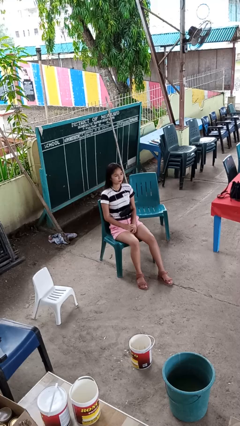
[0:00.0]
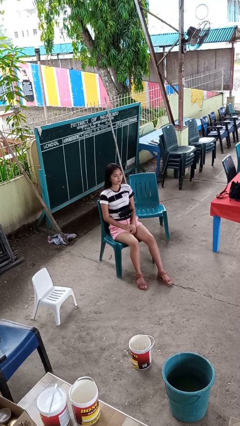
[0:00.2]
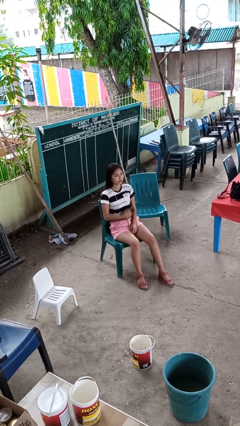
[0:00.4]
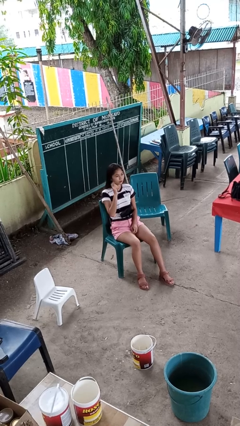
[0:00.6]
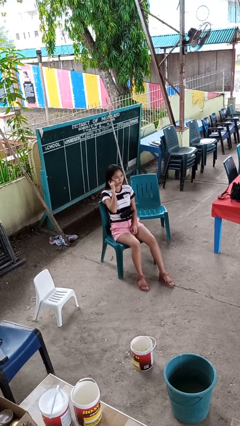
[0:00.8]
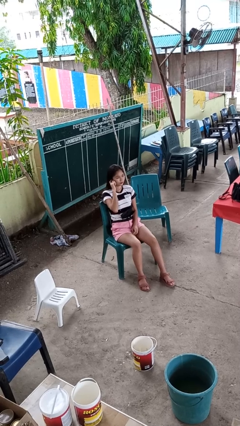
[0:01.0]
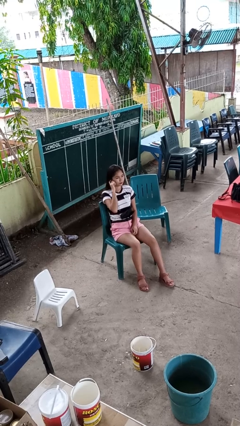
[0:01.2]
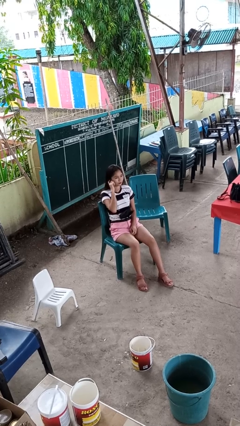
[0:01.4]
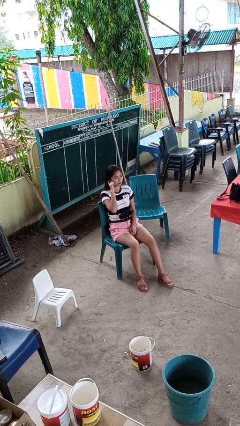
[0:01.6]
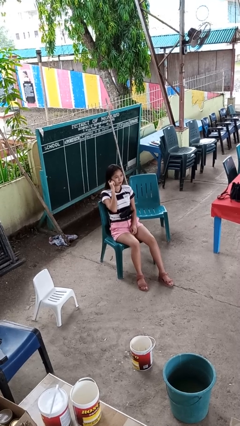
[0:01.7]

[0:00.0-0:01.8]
person gestures listen closely

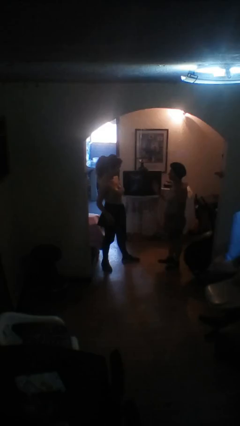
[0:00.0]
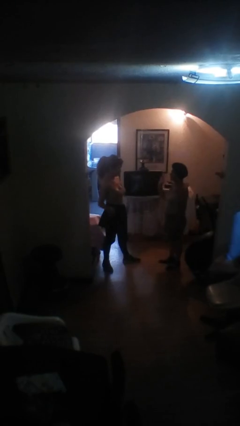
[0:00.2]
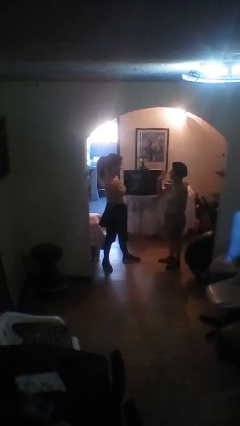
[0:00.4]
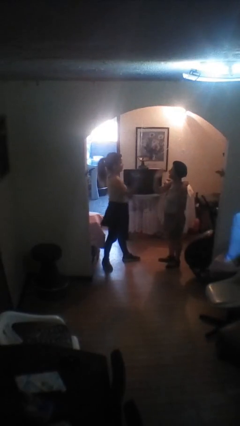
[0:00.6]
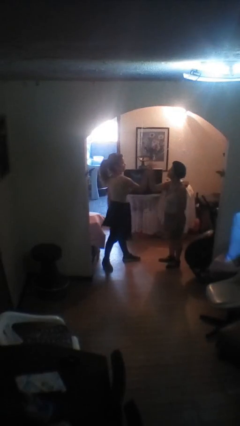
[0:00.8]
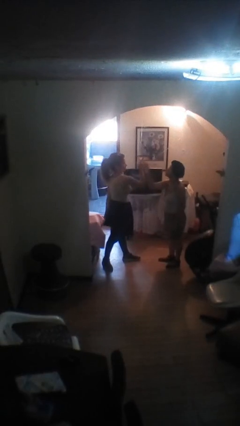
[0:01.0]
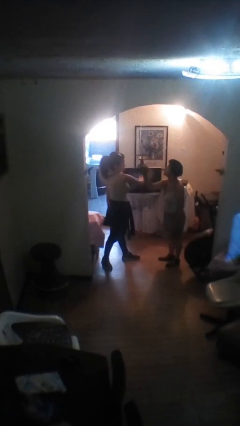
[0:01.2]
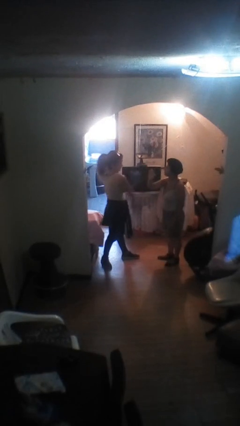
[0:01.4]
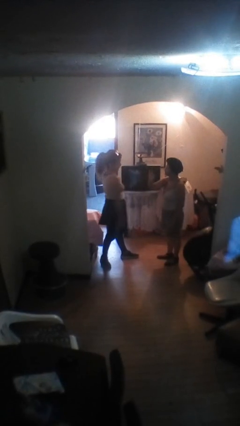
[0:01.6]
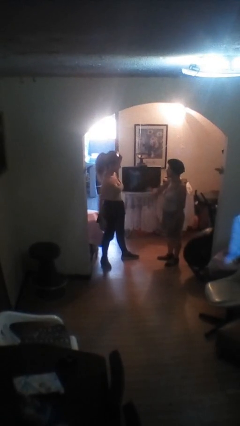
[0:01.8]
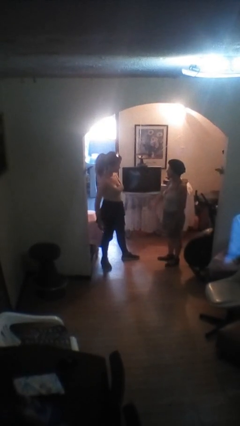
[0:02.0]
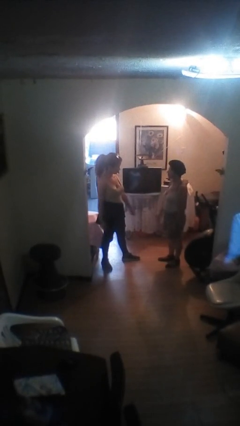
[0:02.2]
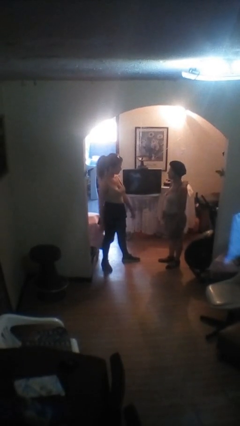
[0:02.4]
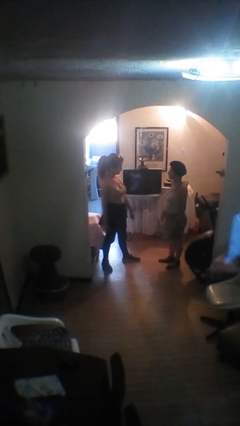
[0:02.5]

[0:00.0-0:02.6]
person highfives hand

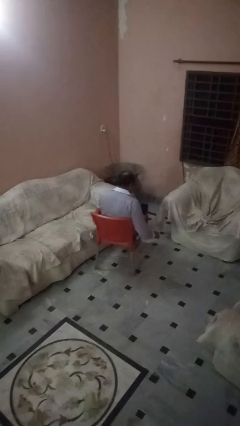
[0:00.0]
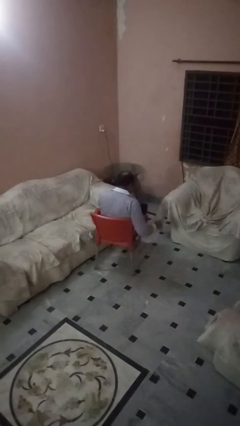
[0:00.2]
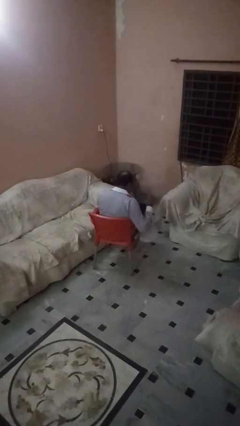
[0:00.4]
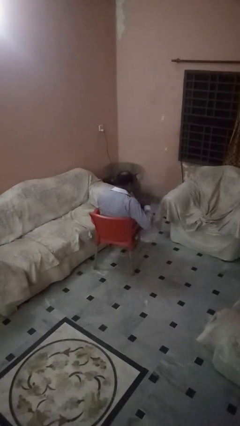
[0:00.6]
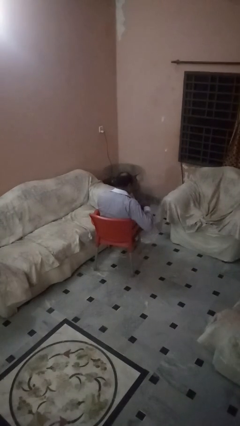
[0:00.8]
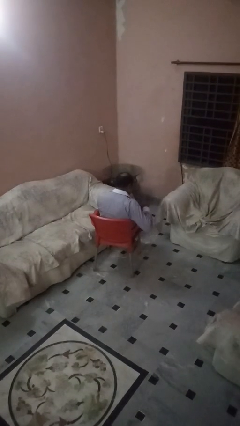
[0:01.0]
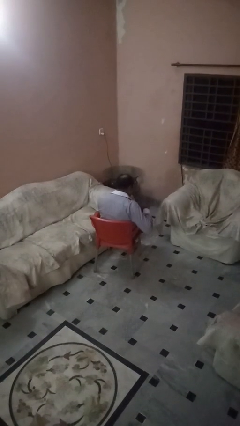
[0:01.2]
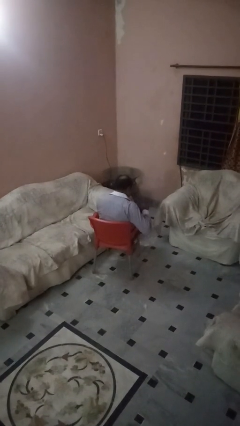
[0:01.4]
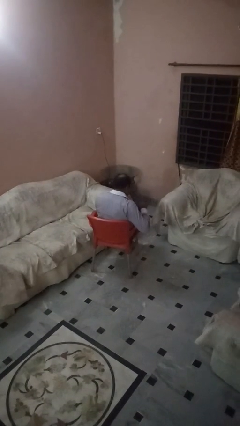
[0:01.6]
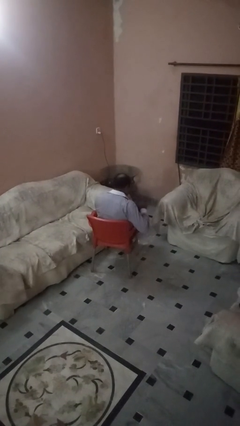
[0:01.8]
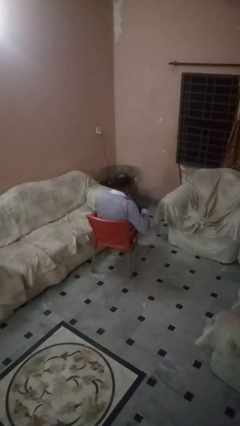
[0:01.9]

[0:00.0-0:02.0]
person stirs mug

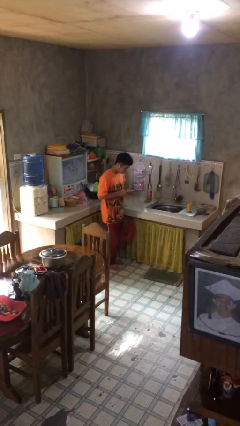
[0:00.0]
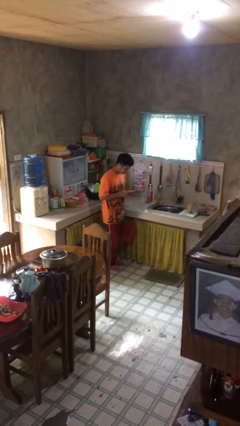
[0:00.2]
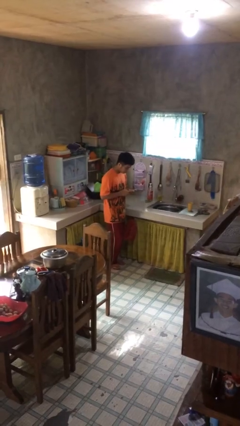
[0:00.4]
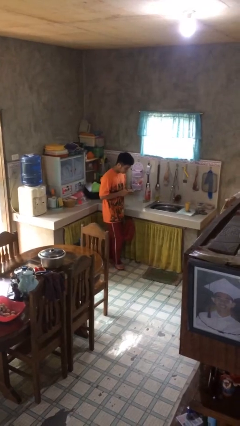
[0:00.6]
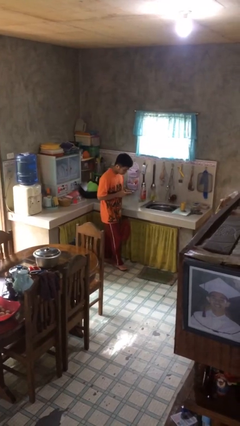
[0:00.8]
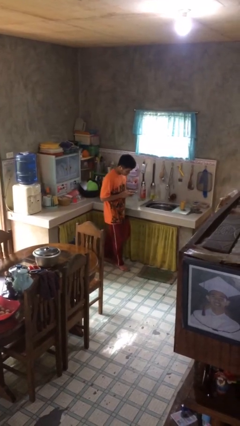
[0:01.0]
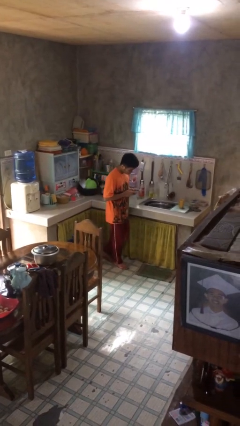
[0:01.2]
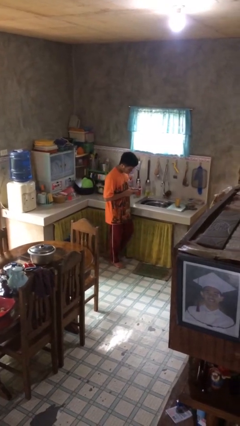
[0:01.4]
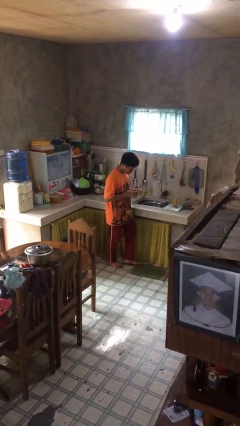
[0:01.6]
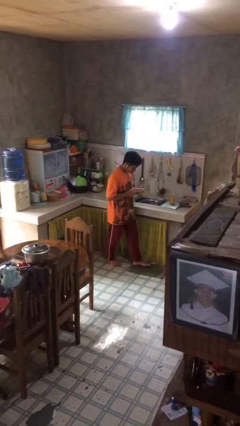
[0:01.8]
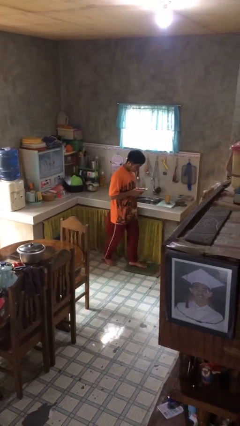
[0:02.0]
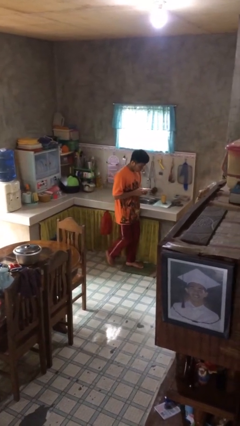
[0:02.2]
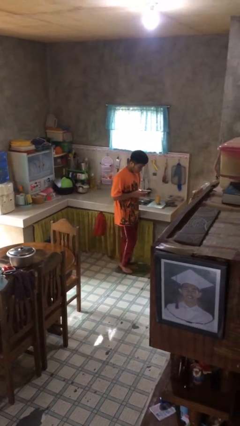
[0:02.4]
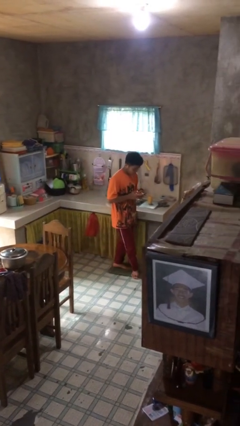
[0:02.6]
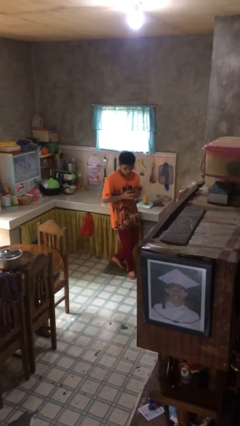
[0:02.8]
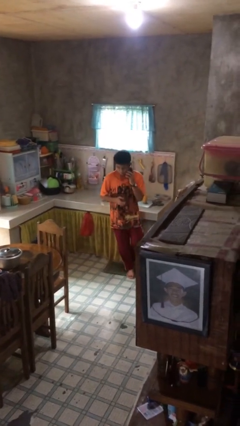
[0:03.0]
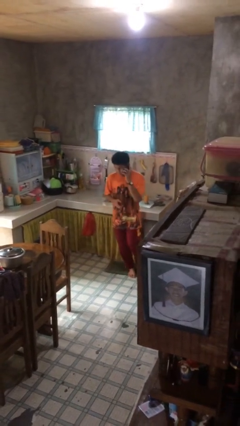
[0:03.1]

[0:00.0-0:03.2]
person texts on phone

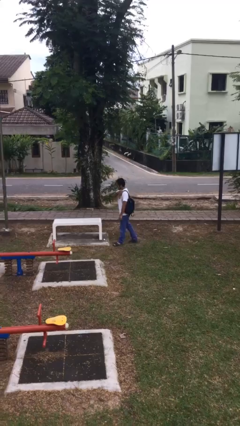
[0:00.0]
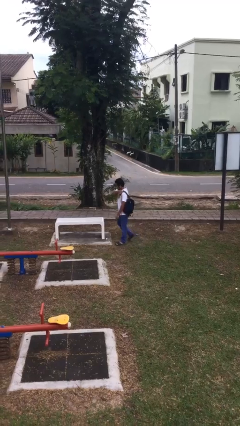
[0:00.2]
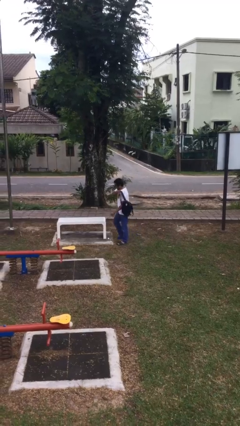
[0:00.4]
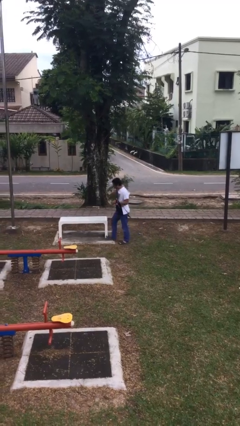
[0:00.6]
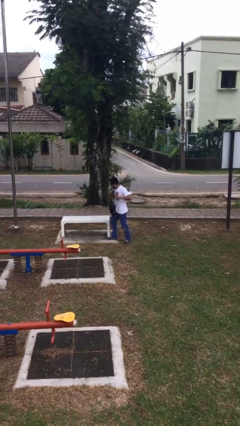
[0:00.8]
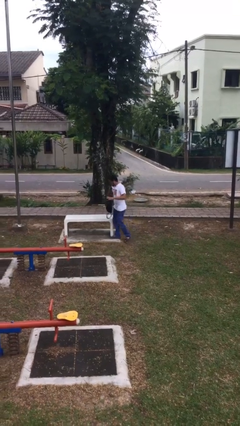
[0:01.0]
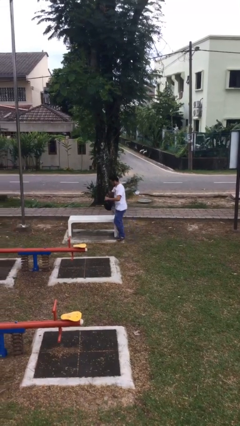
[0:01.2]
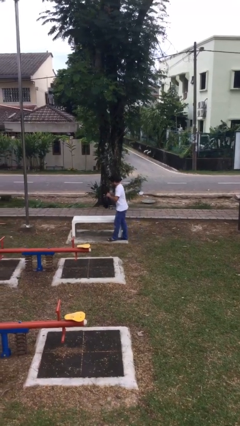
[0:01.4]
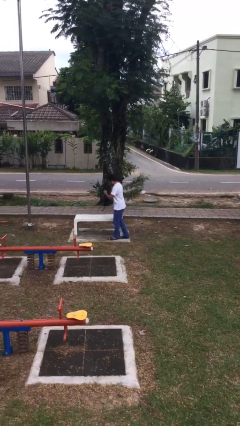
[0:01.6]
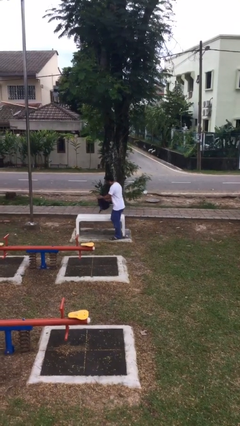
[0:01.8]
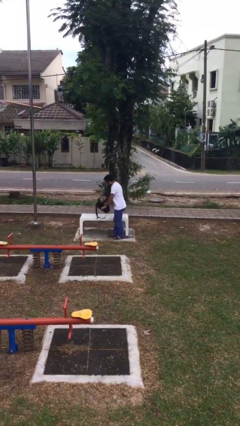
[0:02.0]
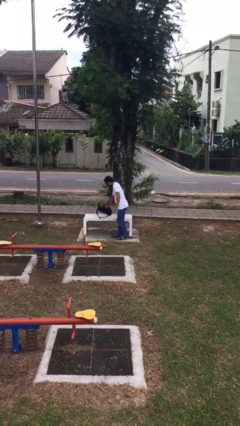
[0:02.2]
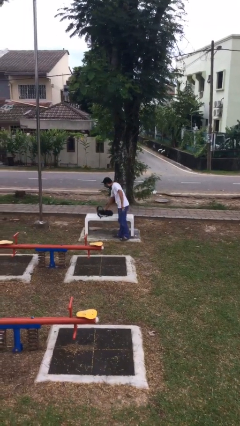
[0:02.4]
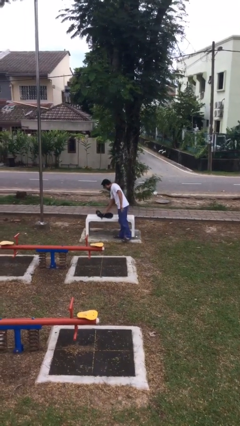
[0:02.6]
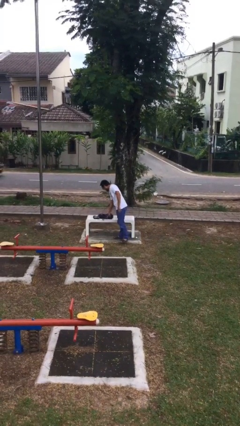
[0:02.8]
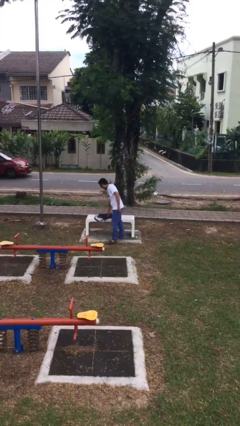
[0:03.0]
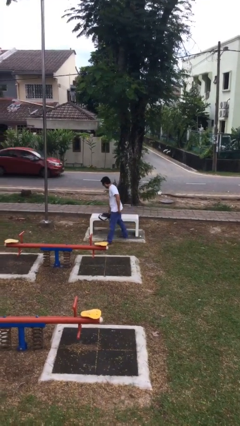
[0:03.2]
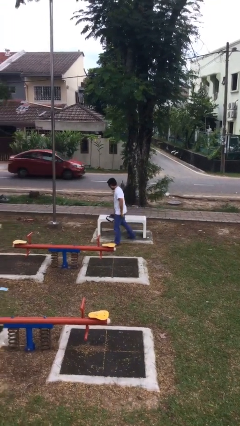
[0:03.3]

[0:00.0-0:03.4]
person puts down object on table

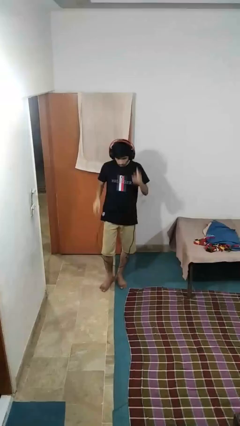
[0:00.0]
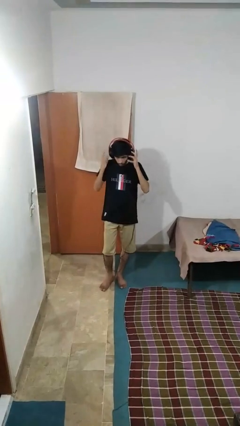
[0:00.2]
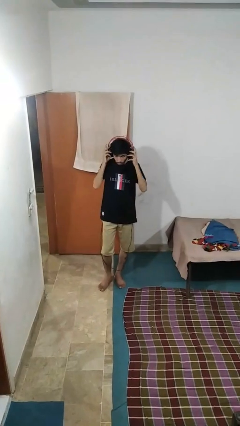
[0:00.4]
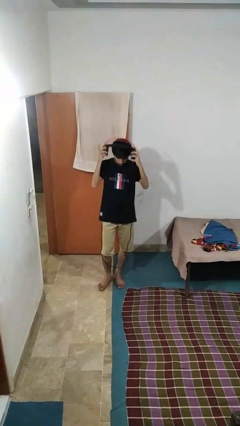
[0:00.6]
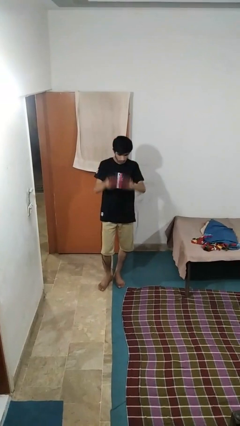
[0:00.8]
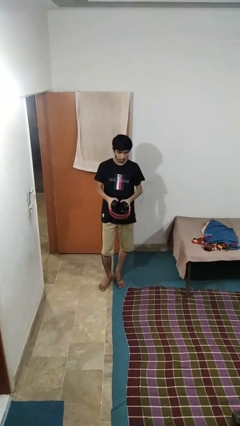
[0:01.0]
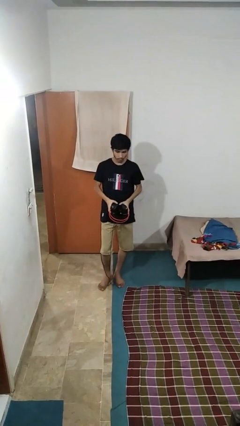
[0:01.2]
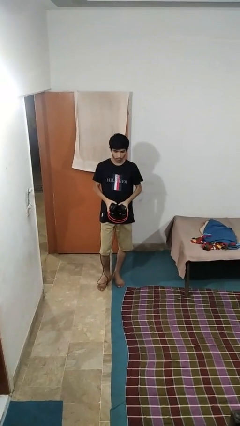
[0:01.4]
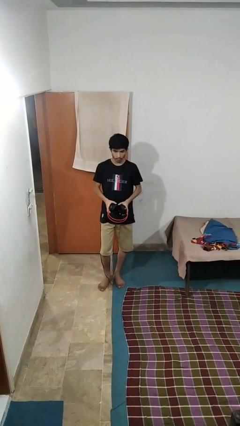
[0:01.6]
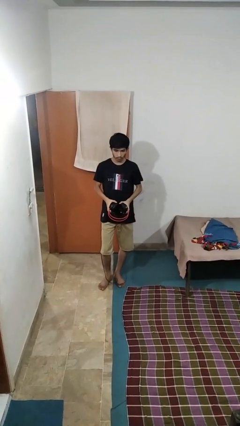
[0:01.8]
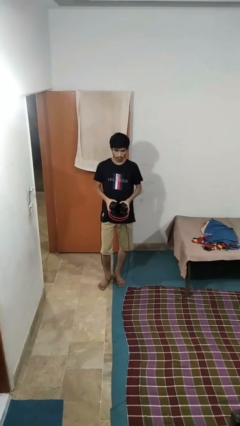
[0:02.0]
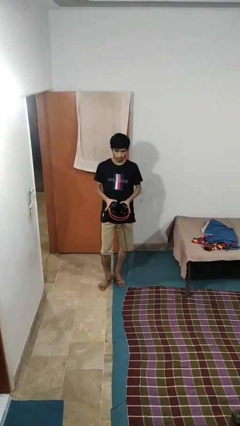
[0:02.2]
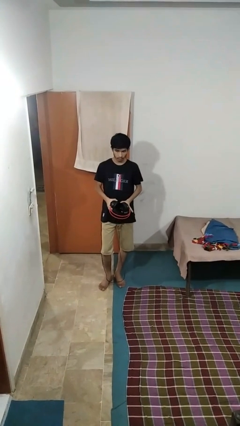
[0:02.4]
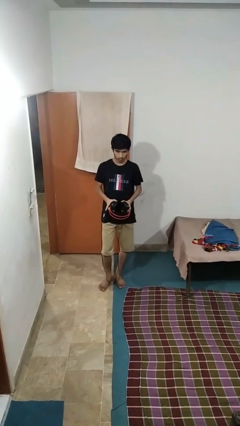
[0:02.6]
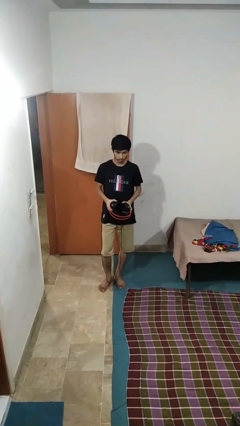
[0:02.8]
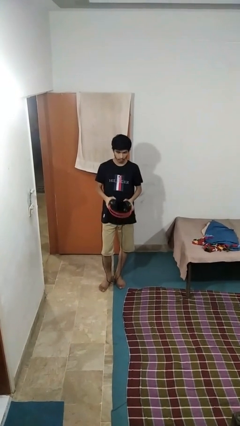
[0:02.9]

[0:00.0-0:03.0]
person takes off headphones

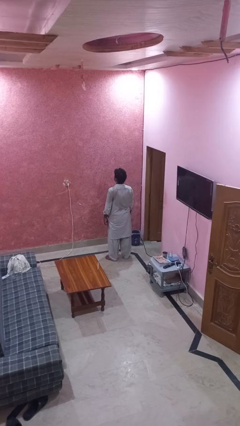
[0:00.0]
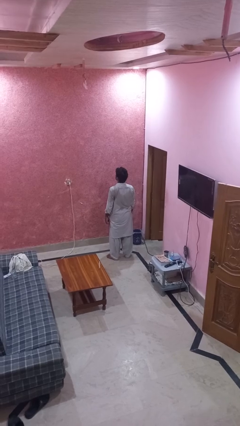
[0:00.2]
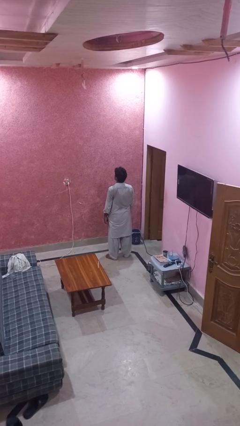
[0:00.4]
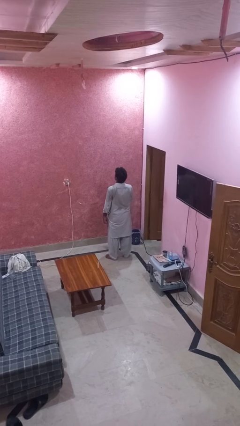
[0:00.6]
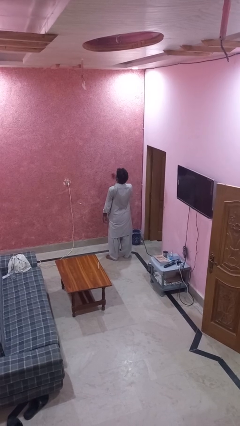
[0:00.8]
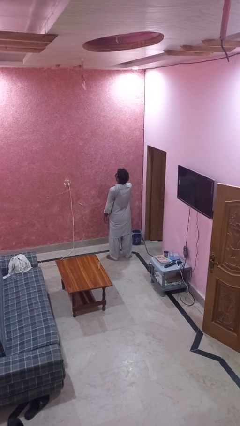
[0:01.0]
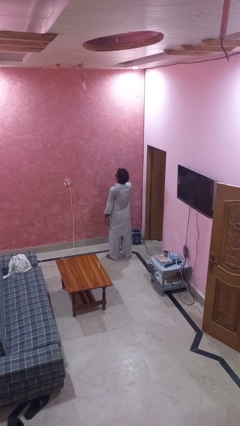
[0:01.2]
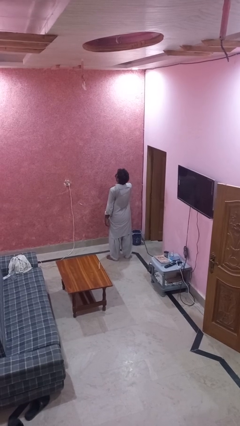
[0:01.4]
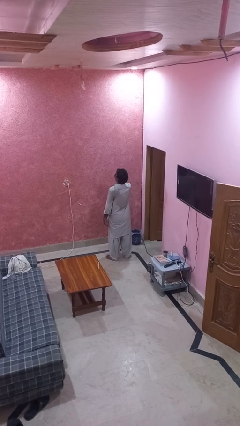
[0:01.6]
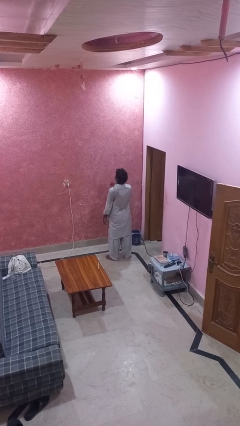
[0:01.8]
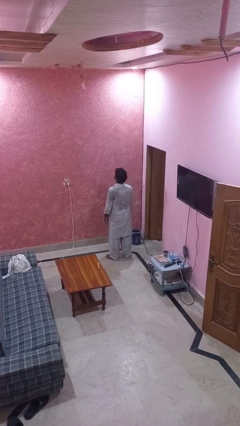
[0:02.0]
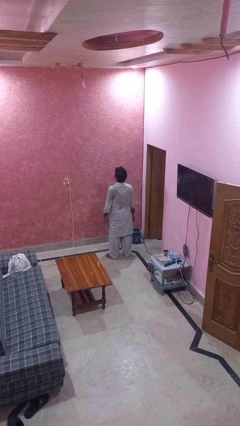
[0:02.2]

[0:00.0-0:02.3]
person yawns
